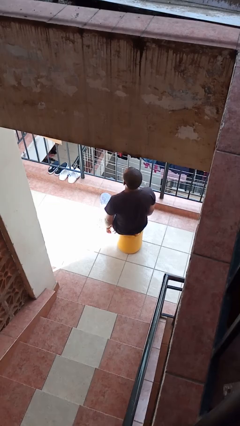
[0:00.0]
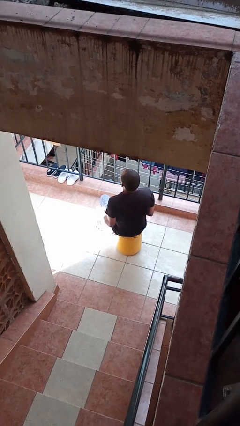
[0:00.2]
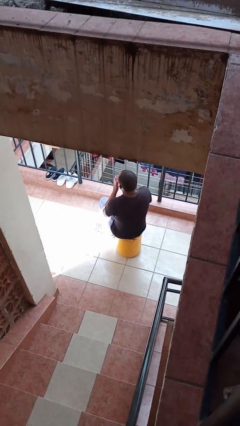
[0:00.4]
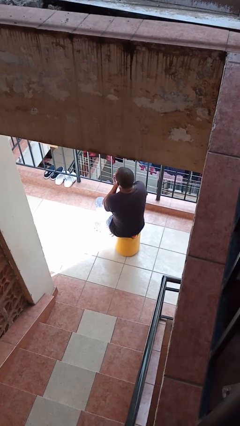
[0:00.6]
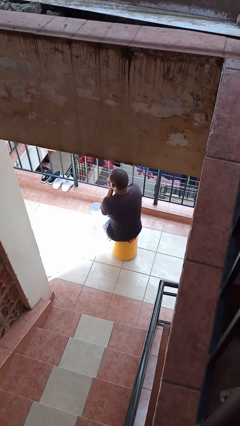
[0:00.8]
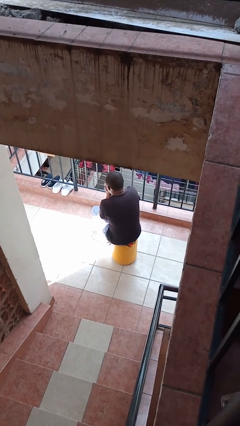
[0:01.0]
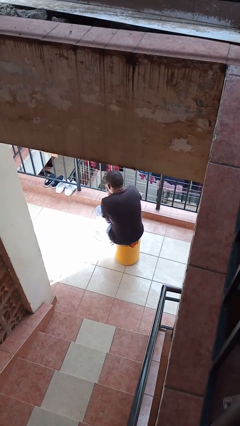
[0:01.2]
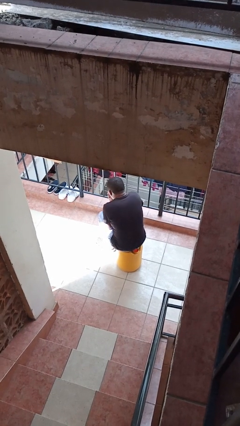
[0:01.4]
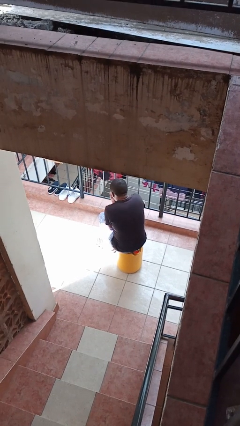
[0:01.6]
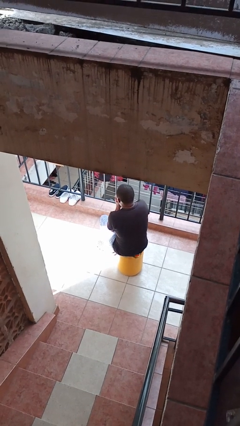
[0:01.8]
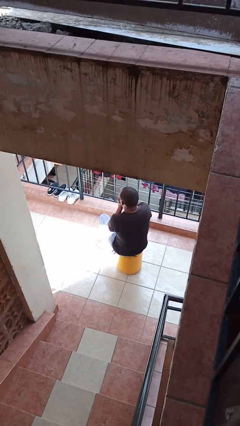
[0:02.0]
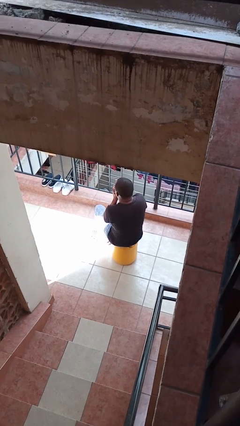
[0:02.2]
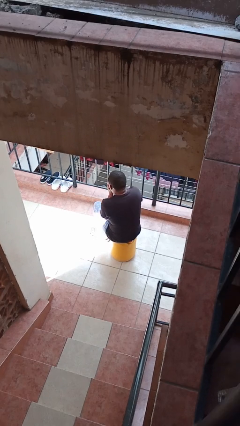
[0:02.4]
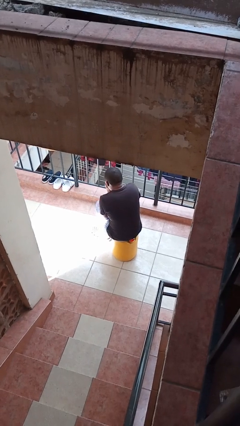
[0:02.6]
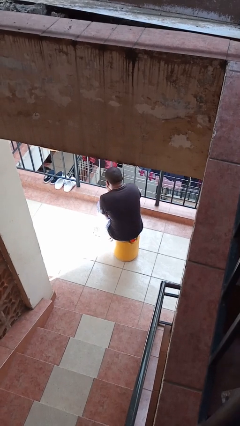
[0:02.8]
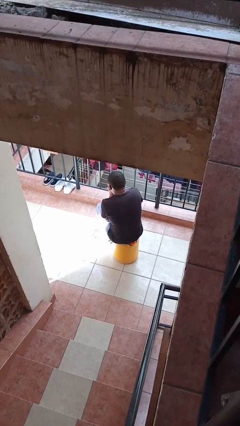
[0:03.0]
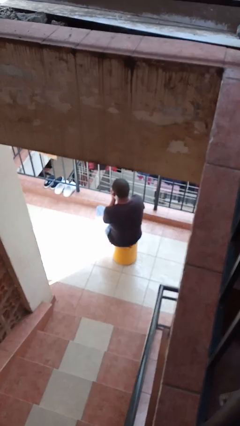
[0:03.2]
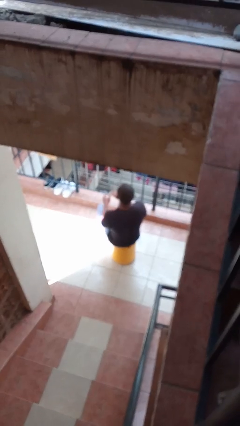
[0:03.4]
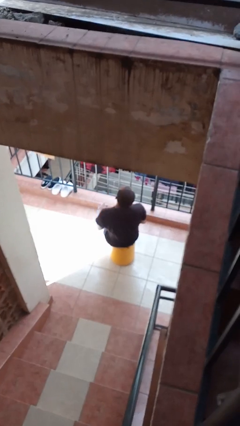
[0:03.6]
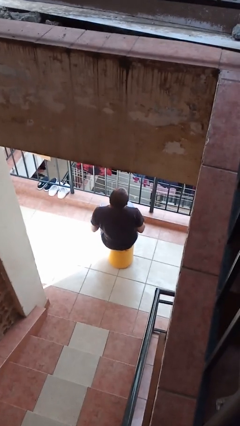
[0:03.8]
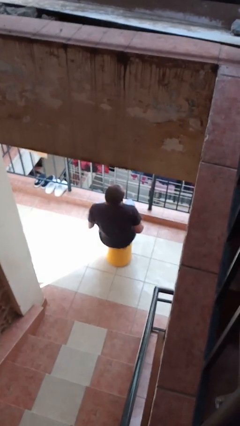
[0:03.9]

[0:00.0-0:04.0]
person blows into hands

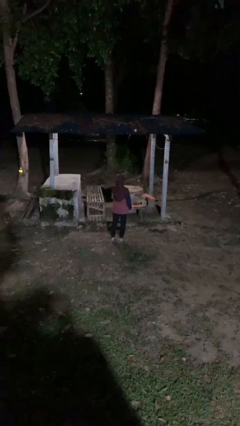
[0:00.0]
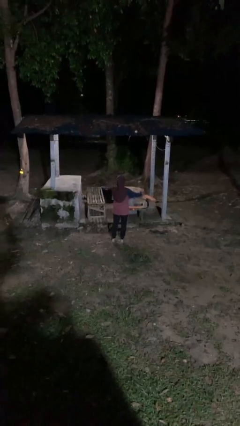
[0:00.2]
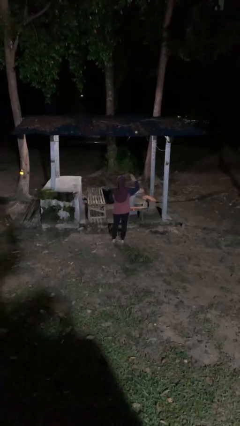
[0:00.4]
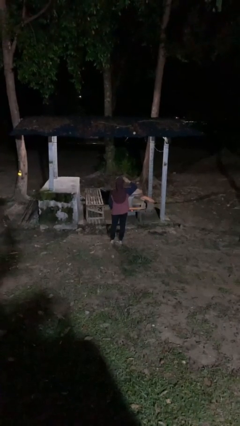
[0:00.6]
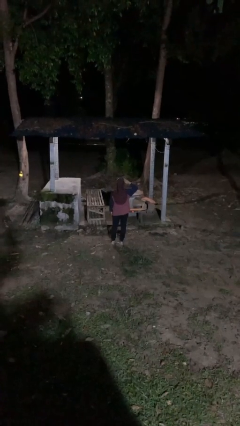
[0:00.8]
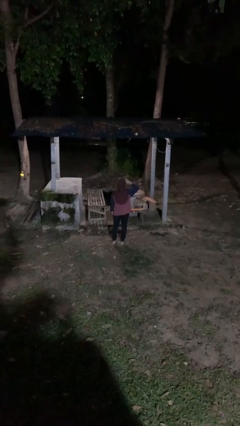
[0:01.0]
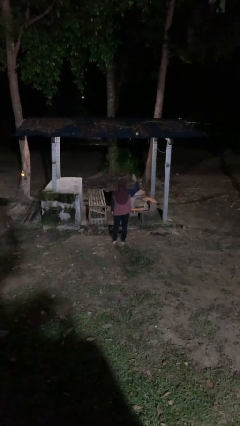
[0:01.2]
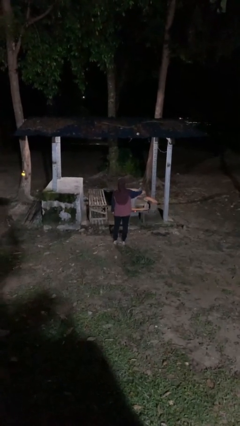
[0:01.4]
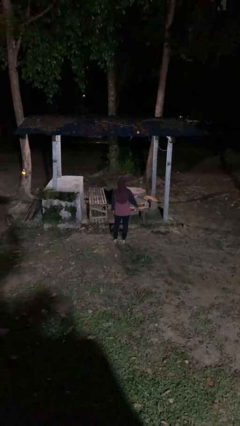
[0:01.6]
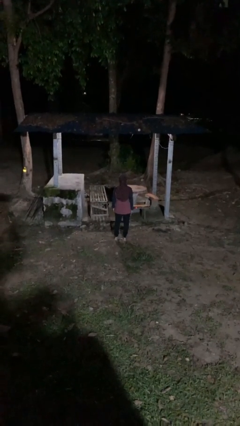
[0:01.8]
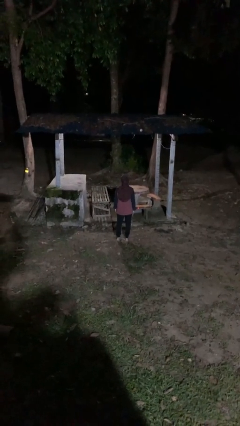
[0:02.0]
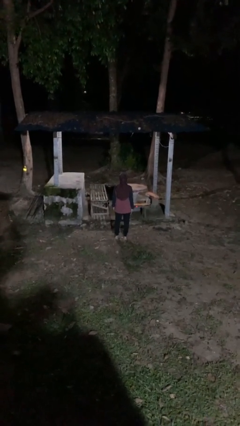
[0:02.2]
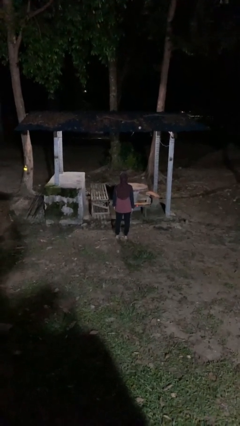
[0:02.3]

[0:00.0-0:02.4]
person salutes

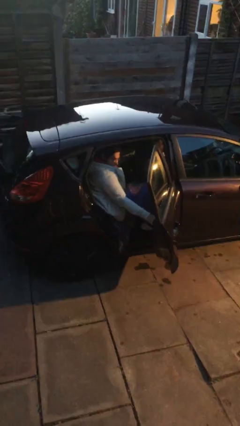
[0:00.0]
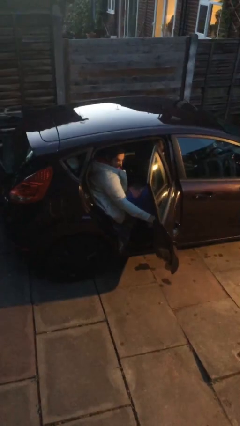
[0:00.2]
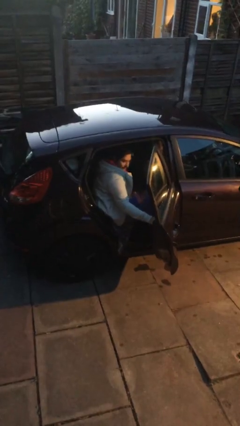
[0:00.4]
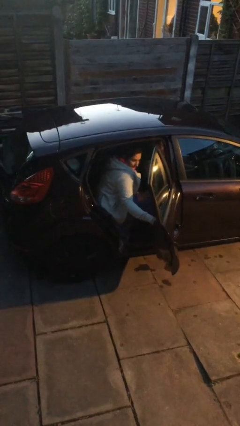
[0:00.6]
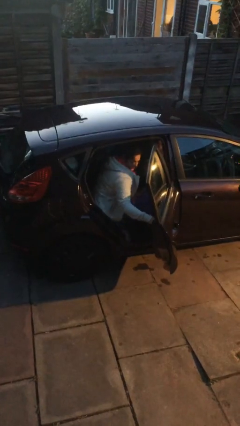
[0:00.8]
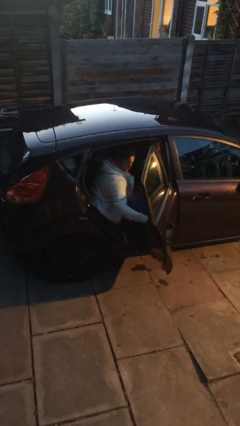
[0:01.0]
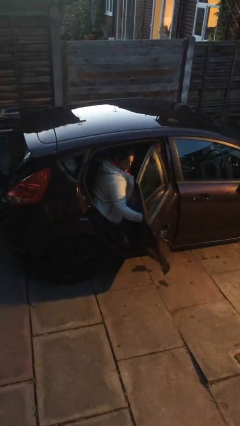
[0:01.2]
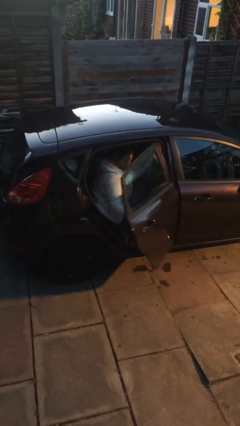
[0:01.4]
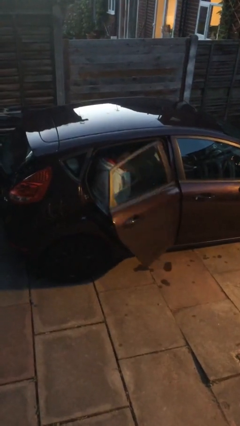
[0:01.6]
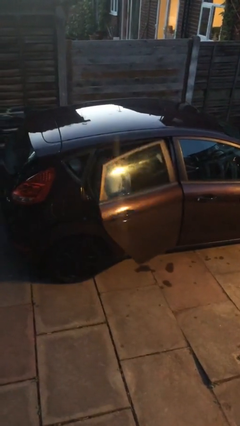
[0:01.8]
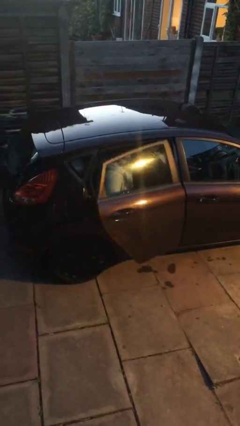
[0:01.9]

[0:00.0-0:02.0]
person closes car door

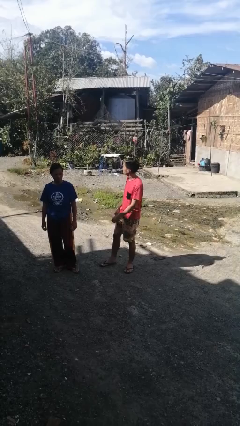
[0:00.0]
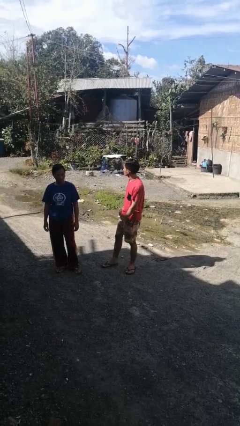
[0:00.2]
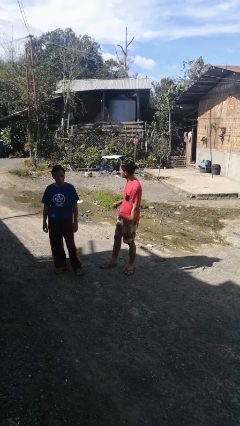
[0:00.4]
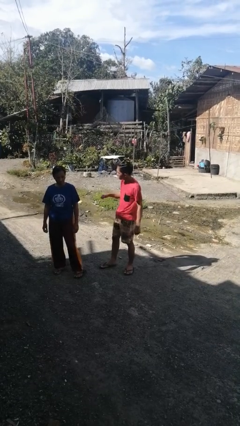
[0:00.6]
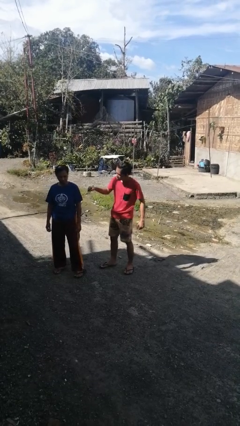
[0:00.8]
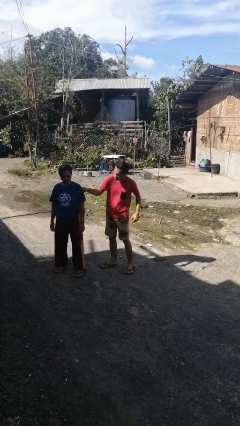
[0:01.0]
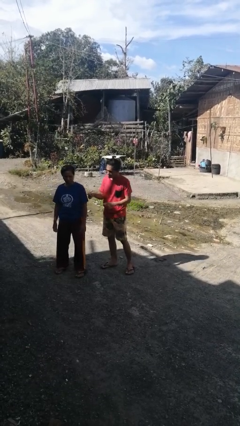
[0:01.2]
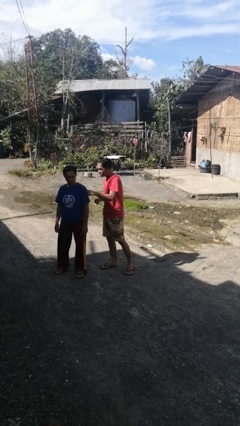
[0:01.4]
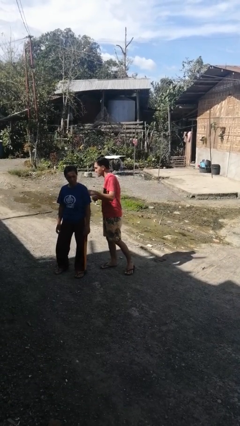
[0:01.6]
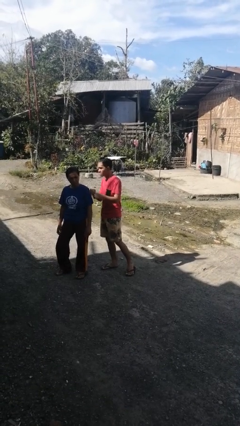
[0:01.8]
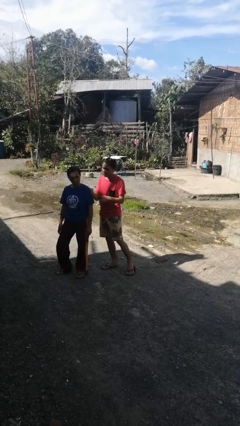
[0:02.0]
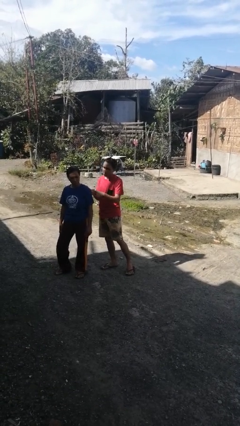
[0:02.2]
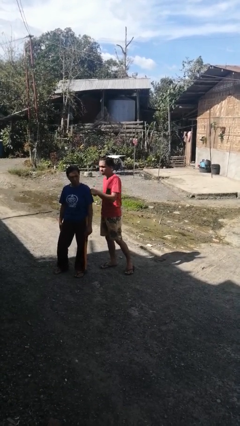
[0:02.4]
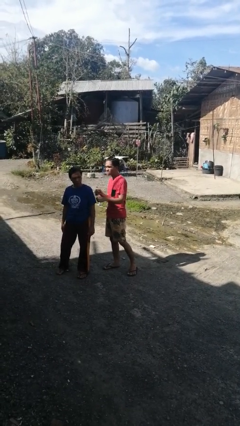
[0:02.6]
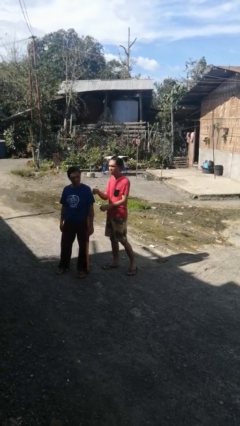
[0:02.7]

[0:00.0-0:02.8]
person pounds shoulders of person

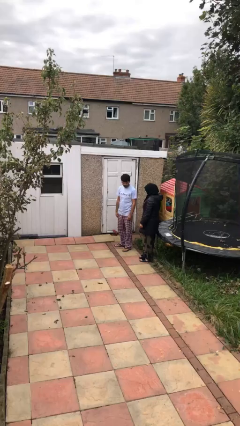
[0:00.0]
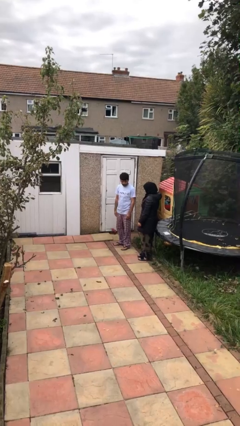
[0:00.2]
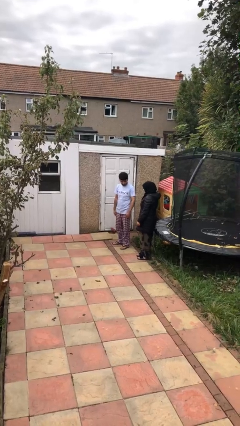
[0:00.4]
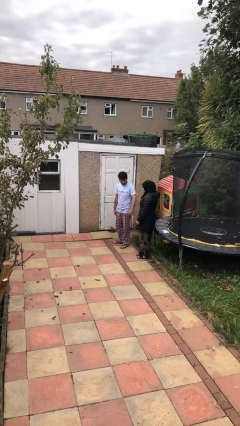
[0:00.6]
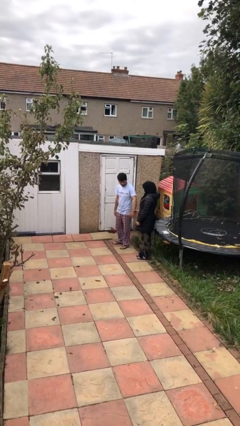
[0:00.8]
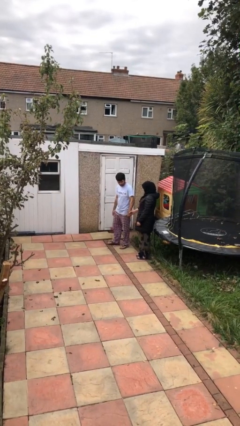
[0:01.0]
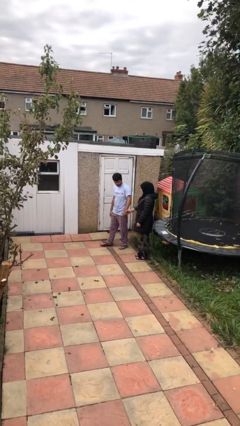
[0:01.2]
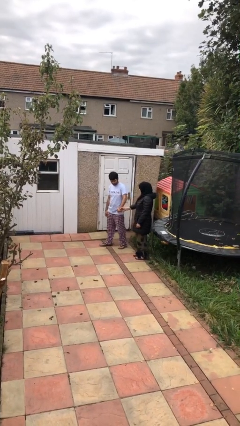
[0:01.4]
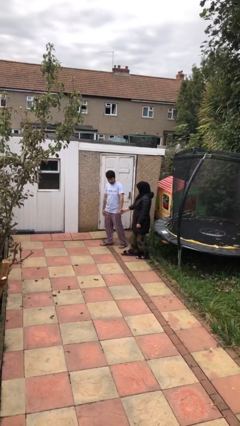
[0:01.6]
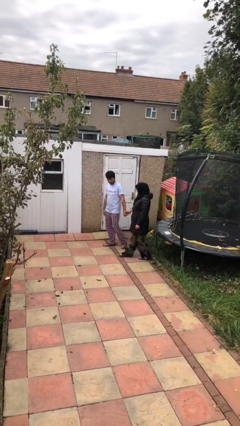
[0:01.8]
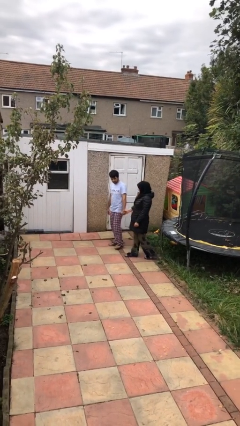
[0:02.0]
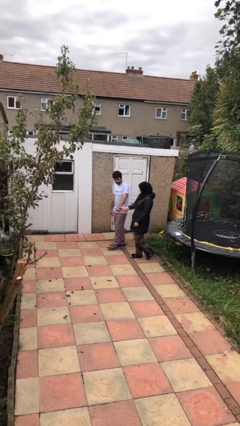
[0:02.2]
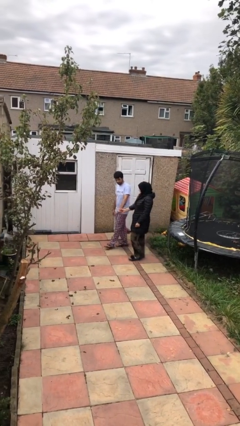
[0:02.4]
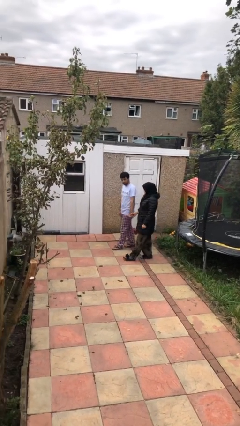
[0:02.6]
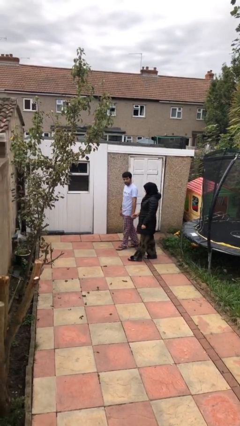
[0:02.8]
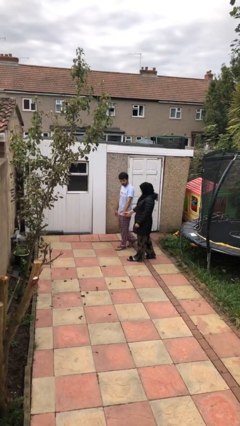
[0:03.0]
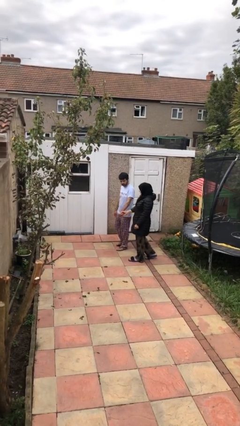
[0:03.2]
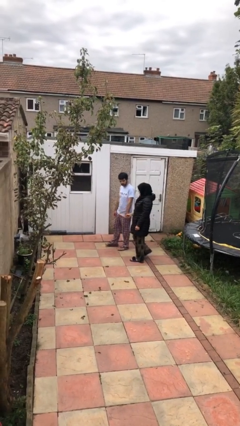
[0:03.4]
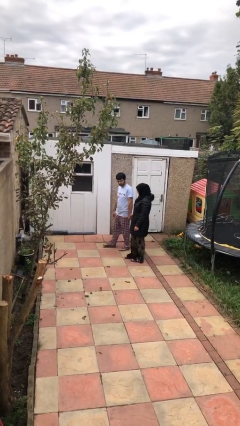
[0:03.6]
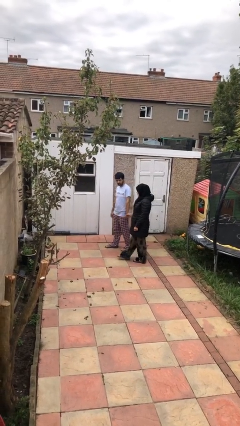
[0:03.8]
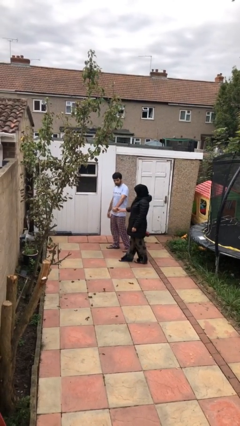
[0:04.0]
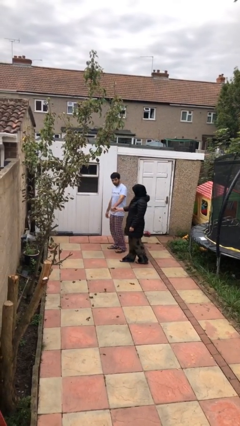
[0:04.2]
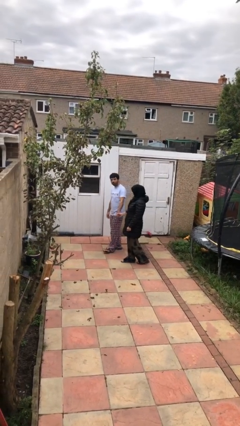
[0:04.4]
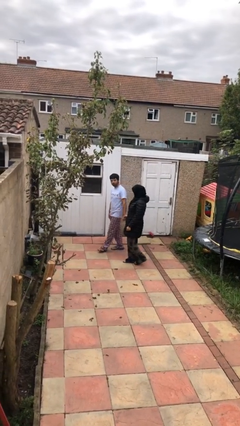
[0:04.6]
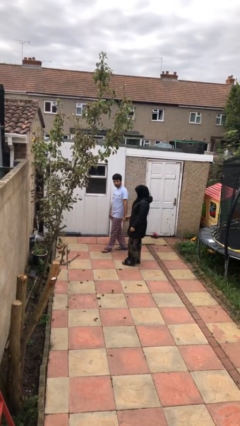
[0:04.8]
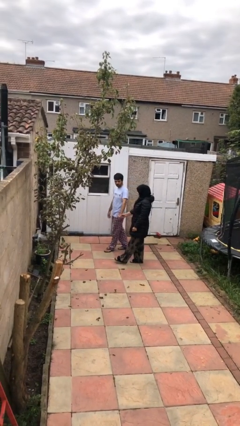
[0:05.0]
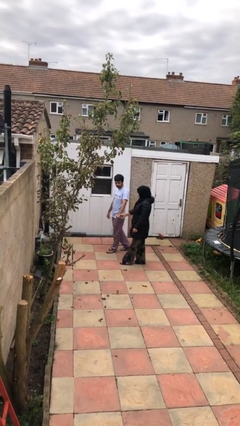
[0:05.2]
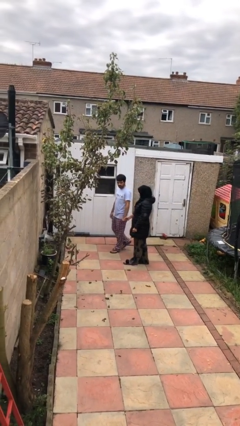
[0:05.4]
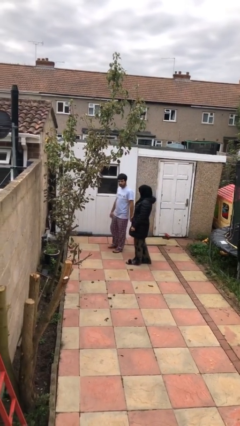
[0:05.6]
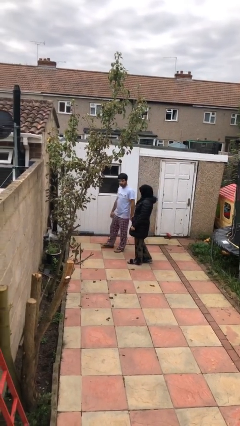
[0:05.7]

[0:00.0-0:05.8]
person holds hand

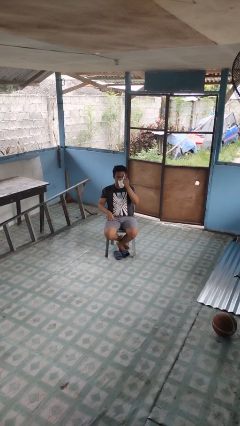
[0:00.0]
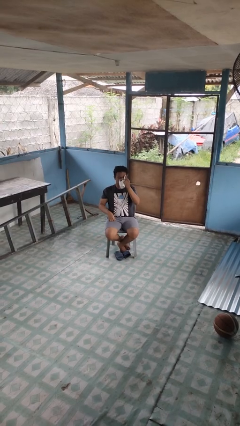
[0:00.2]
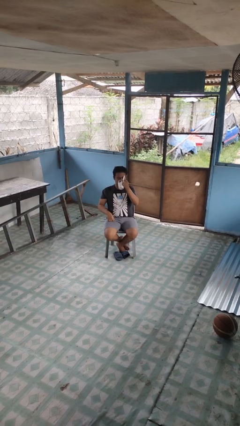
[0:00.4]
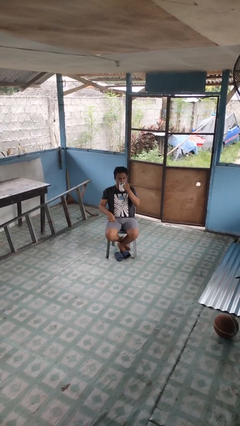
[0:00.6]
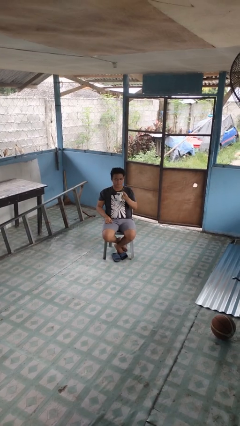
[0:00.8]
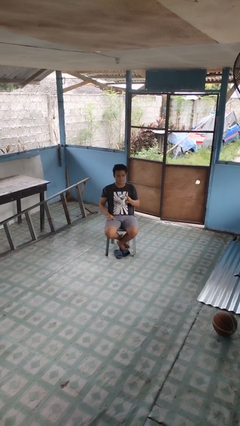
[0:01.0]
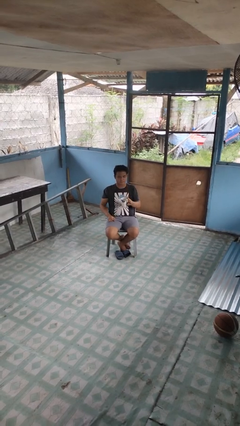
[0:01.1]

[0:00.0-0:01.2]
person drinks from mug
